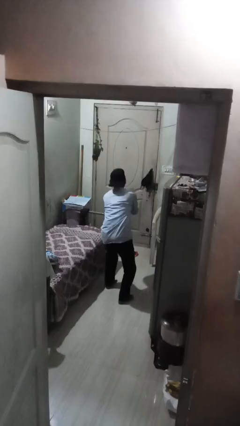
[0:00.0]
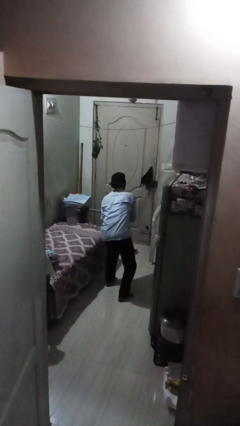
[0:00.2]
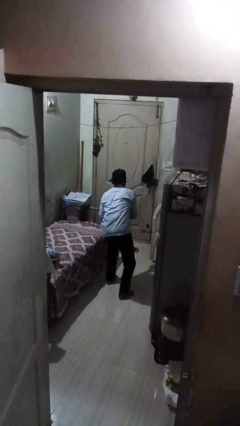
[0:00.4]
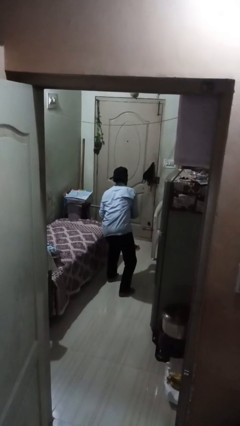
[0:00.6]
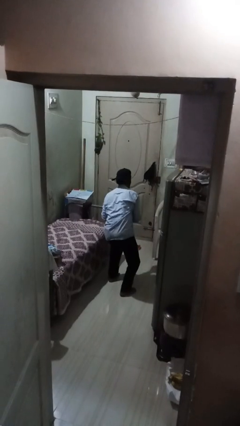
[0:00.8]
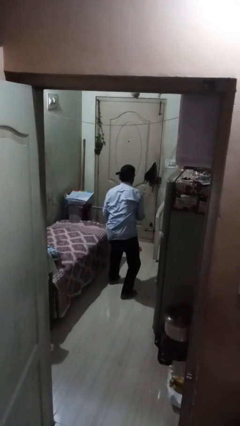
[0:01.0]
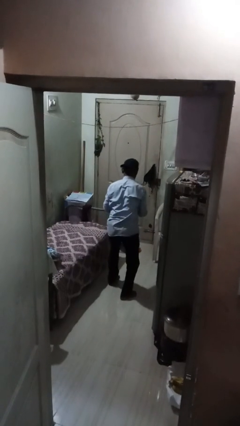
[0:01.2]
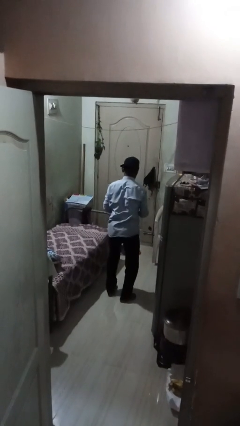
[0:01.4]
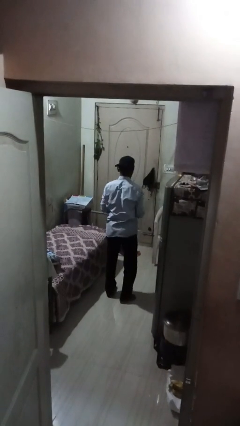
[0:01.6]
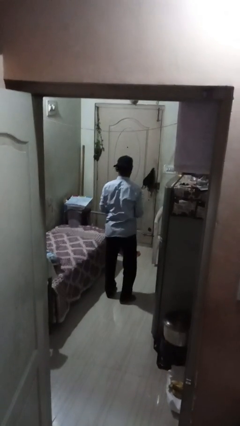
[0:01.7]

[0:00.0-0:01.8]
person catches dropped object

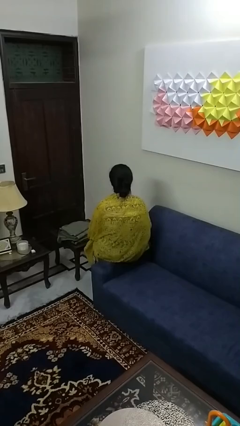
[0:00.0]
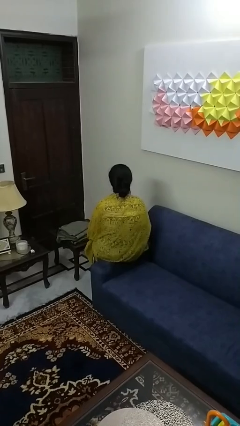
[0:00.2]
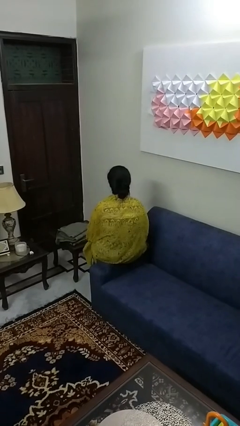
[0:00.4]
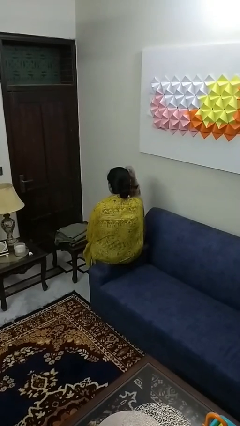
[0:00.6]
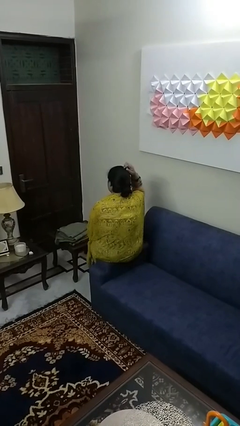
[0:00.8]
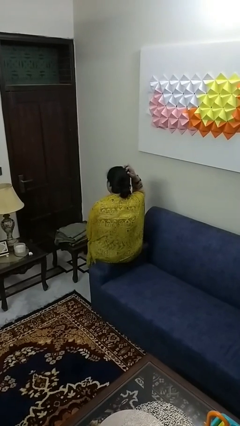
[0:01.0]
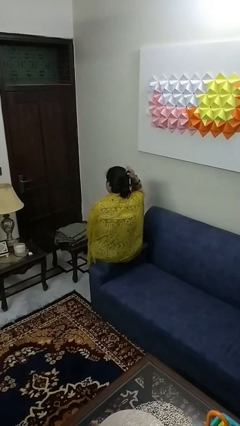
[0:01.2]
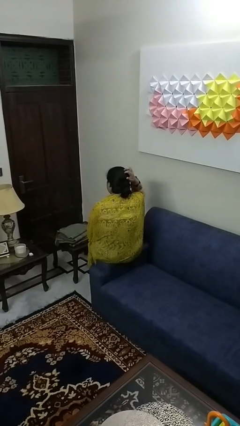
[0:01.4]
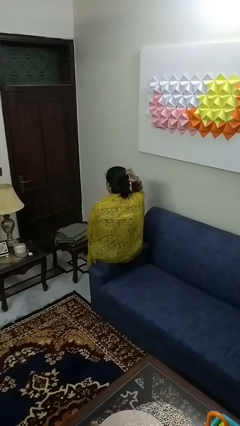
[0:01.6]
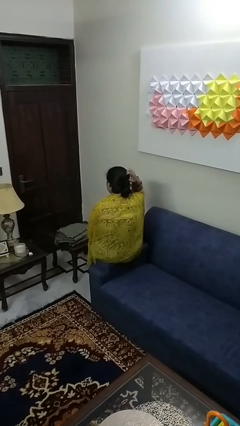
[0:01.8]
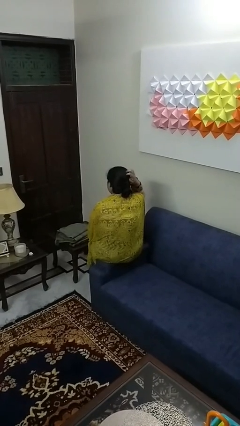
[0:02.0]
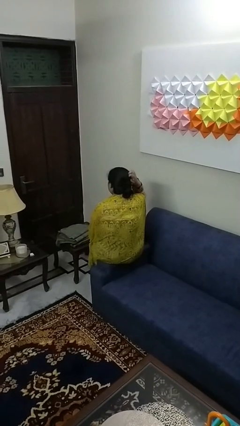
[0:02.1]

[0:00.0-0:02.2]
person scratches face

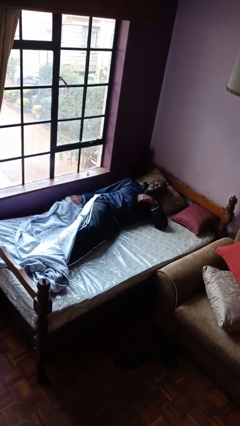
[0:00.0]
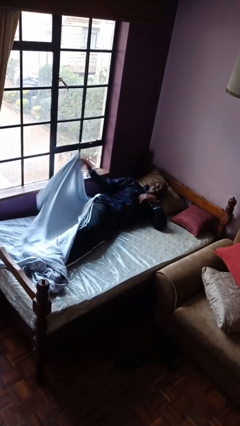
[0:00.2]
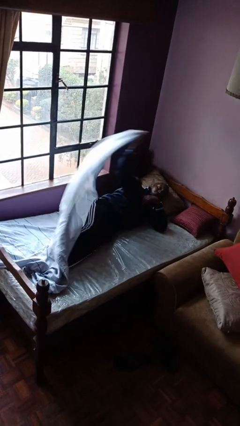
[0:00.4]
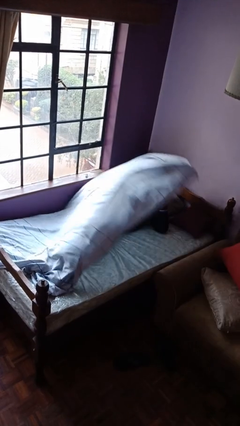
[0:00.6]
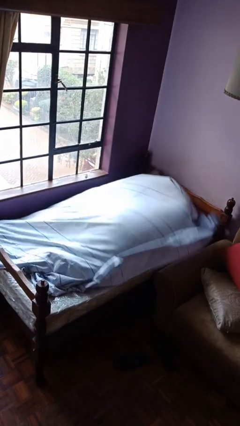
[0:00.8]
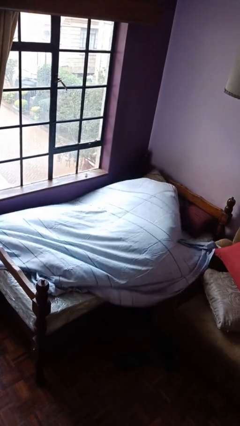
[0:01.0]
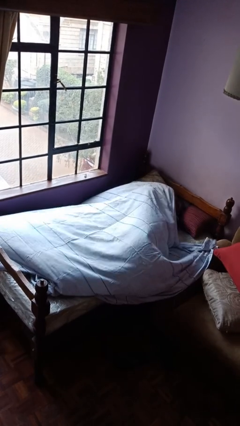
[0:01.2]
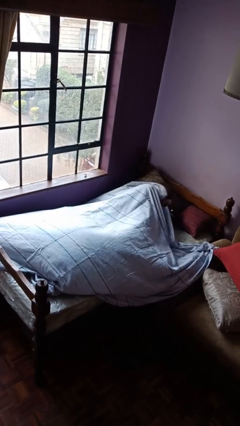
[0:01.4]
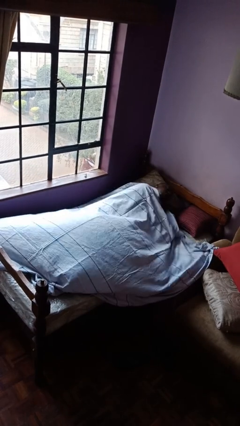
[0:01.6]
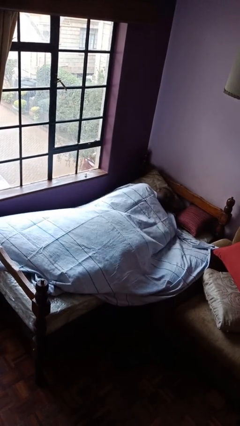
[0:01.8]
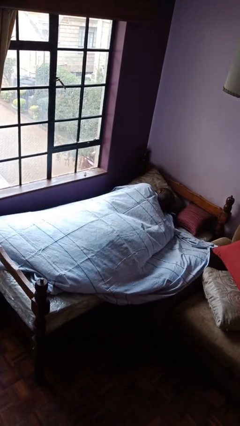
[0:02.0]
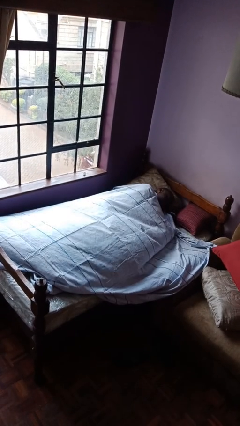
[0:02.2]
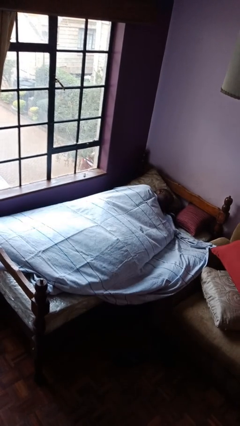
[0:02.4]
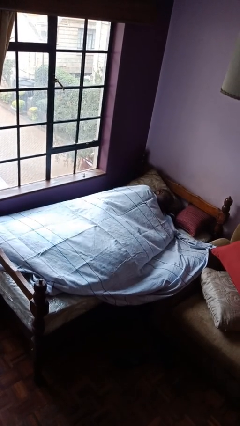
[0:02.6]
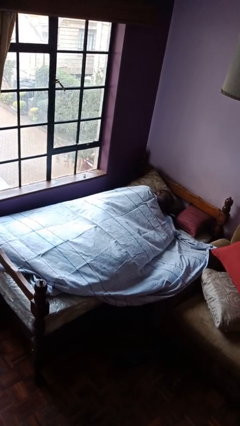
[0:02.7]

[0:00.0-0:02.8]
person covers with bedsheets

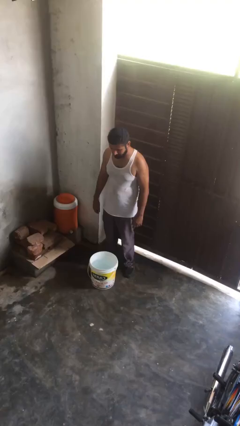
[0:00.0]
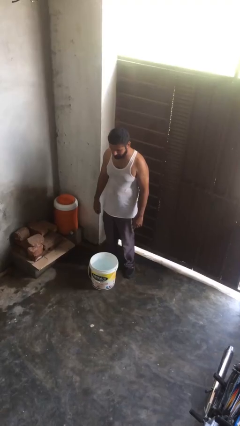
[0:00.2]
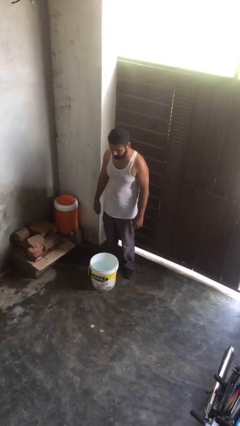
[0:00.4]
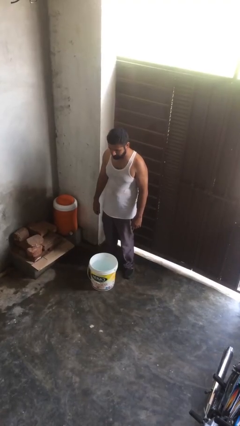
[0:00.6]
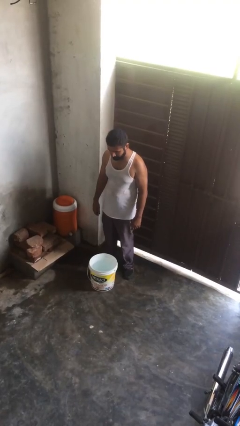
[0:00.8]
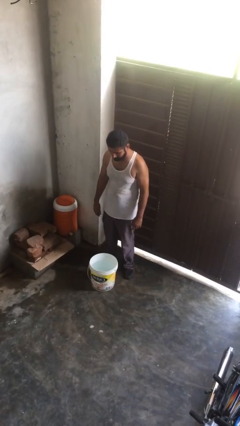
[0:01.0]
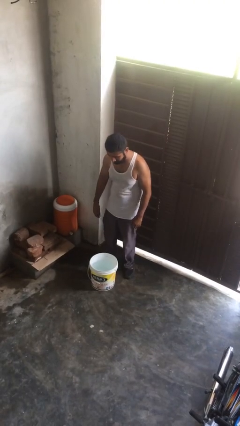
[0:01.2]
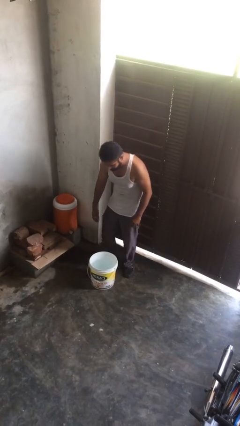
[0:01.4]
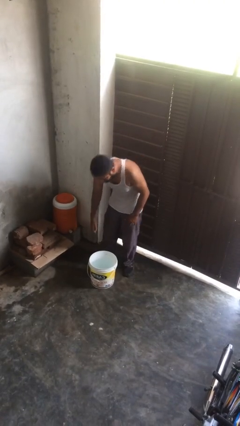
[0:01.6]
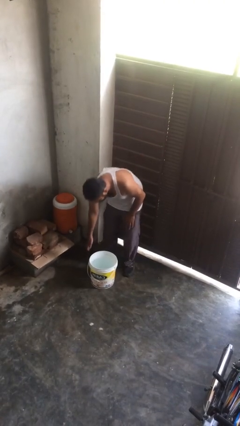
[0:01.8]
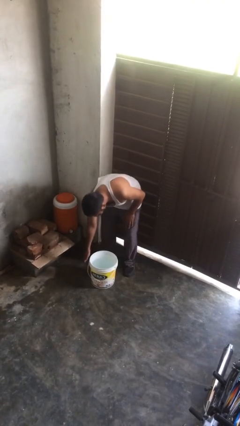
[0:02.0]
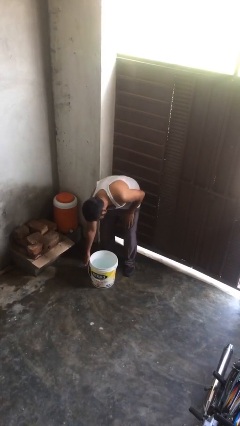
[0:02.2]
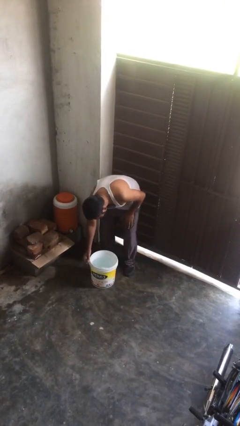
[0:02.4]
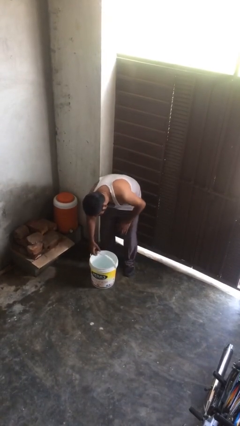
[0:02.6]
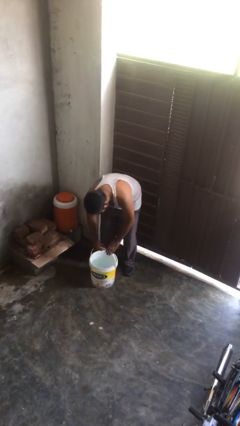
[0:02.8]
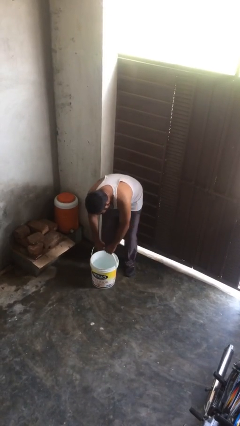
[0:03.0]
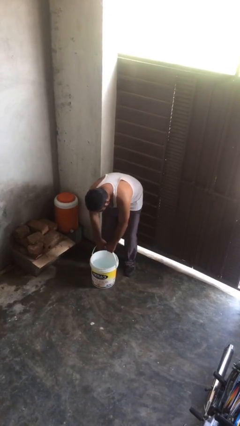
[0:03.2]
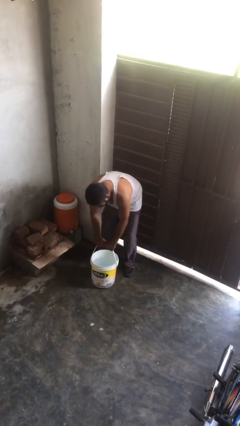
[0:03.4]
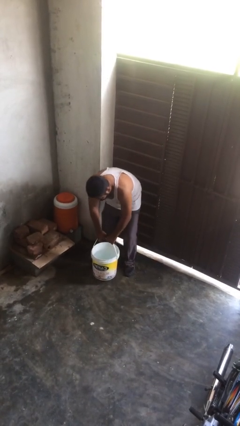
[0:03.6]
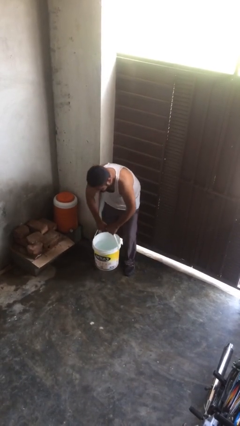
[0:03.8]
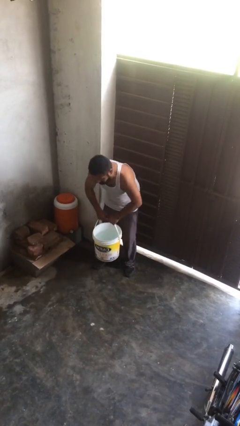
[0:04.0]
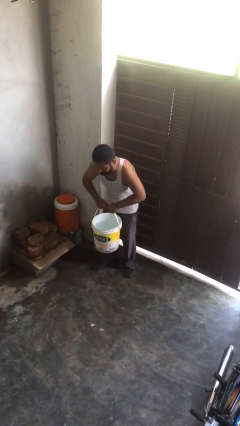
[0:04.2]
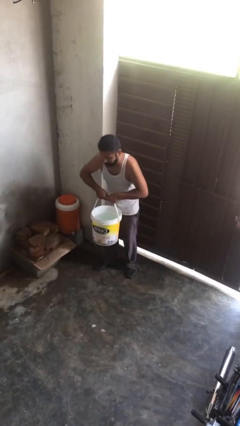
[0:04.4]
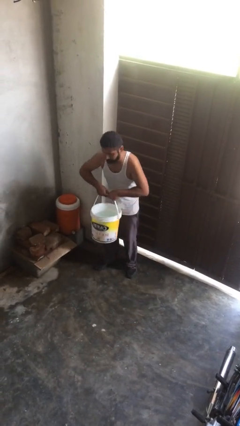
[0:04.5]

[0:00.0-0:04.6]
person picks up object from floor

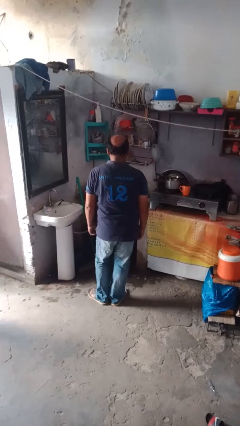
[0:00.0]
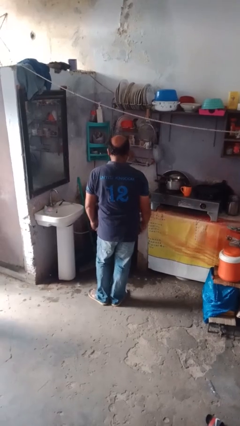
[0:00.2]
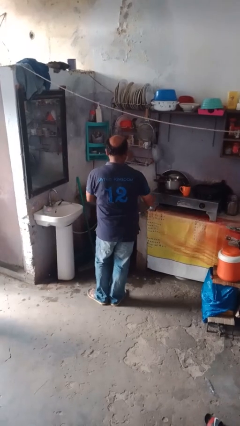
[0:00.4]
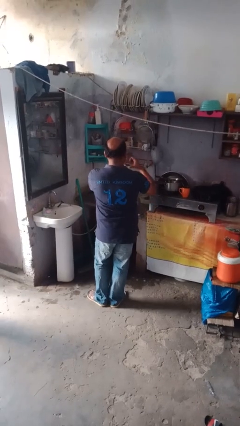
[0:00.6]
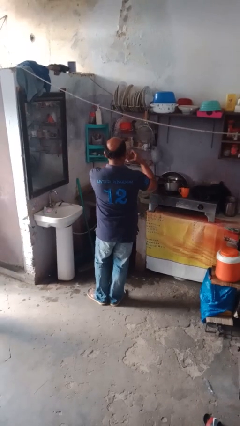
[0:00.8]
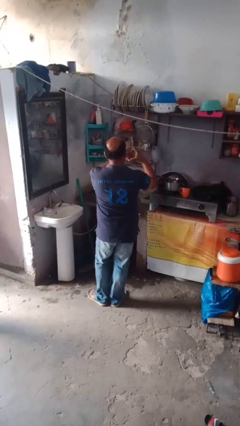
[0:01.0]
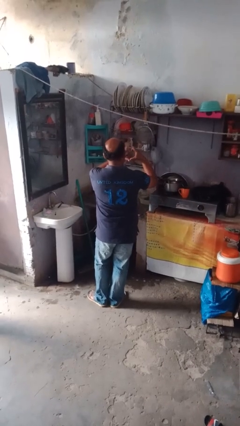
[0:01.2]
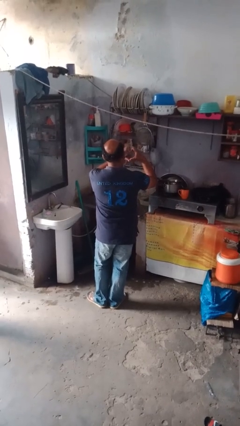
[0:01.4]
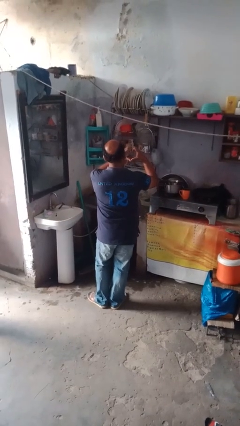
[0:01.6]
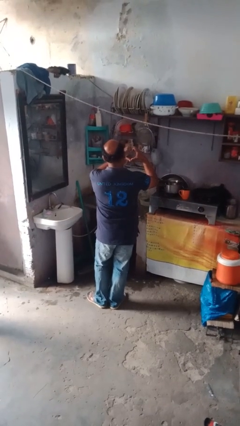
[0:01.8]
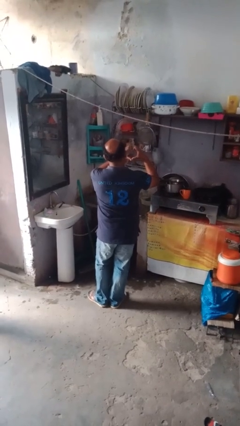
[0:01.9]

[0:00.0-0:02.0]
person gestures heart

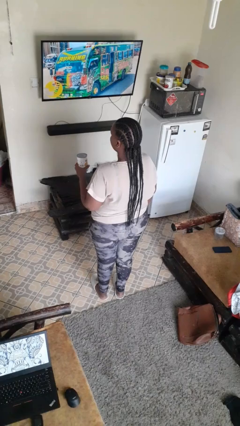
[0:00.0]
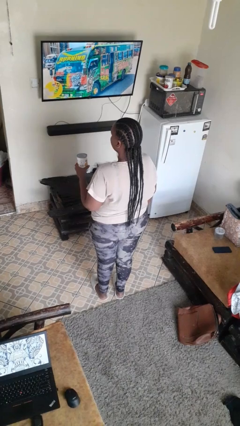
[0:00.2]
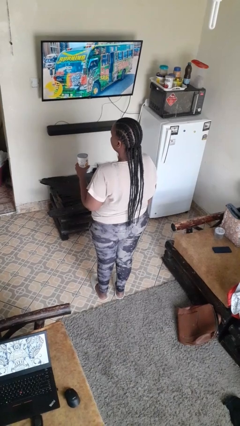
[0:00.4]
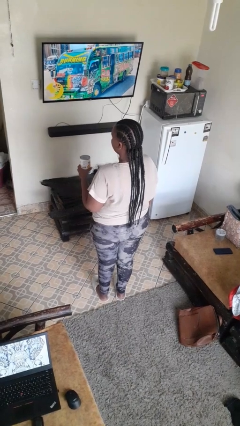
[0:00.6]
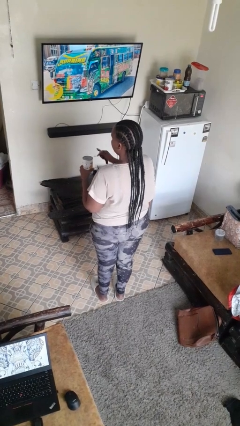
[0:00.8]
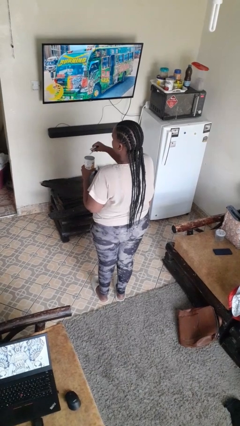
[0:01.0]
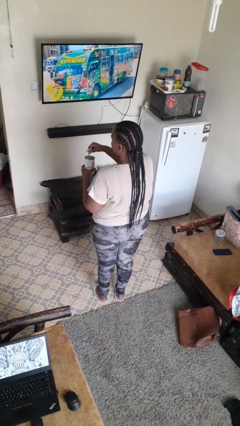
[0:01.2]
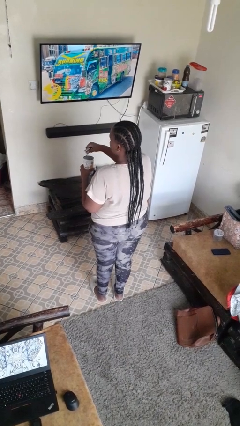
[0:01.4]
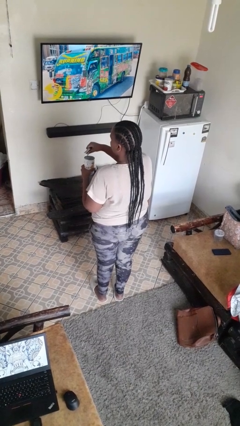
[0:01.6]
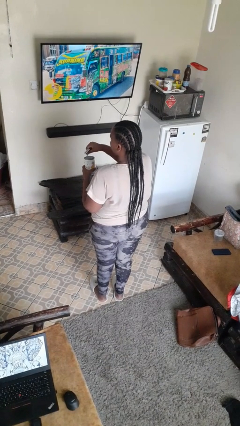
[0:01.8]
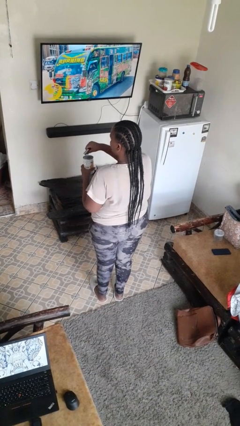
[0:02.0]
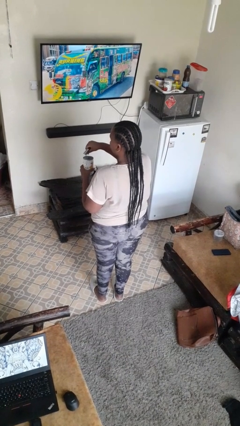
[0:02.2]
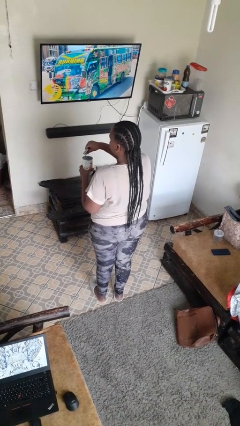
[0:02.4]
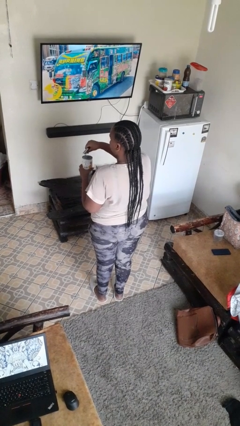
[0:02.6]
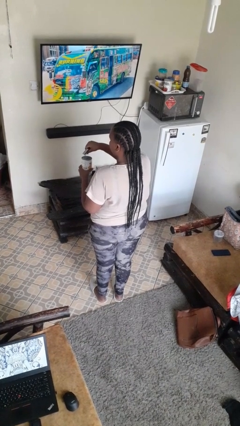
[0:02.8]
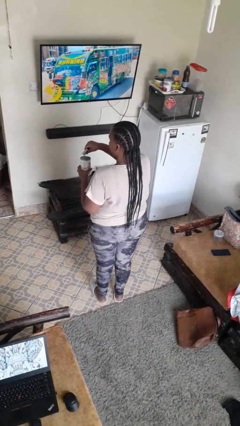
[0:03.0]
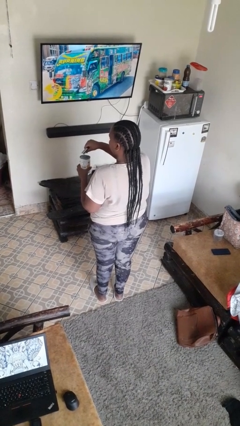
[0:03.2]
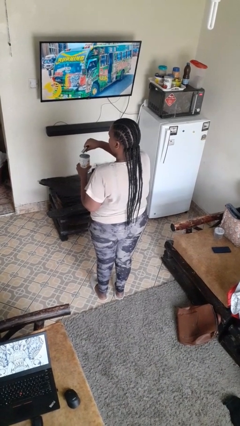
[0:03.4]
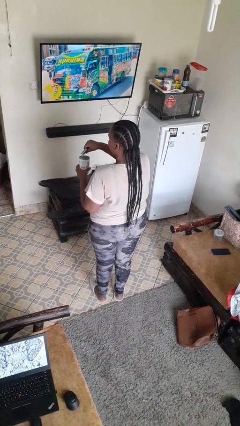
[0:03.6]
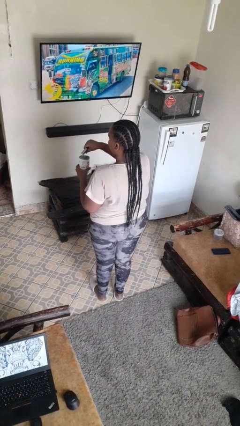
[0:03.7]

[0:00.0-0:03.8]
person opens can with can opener
